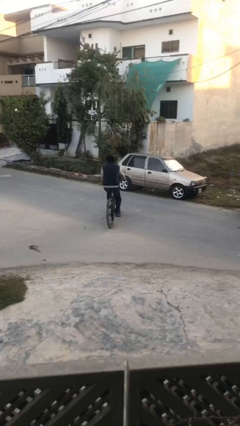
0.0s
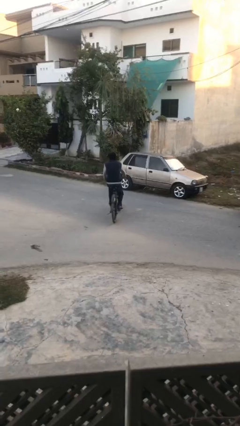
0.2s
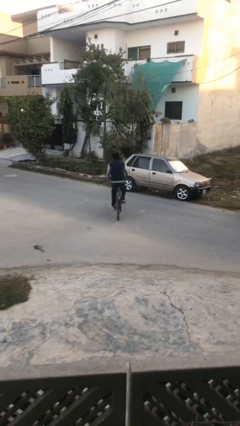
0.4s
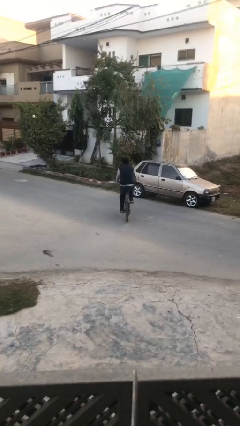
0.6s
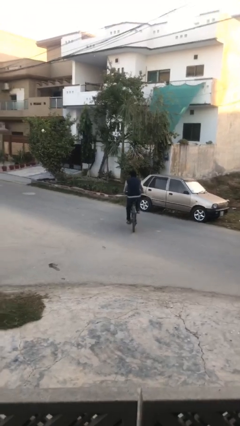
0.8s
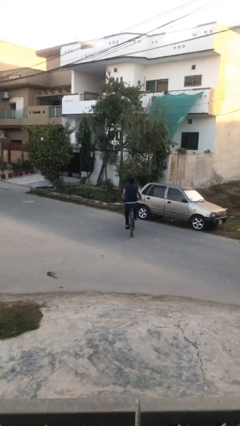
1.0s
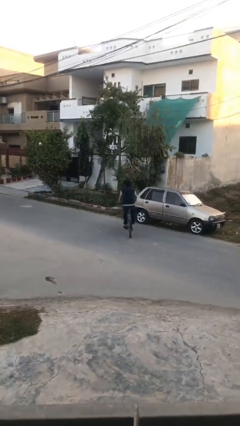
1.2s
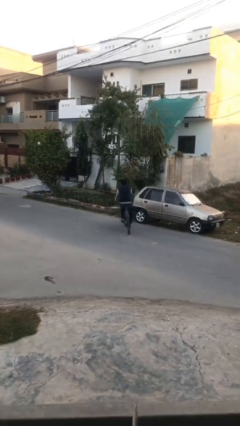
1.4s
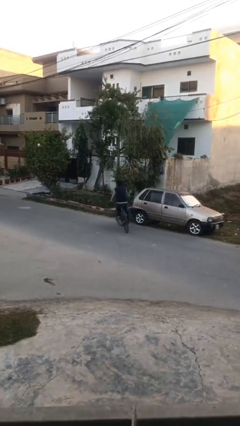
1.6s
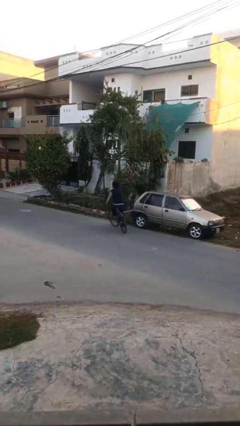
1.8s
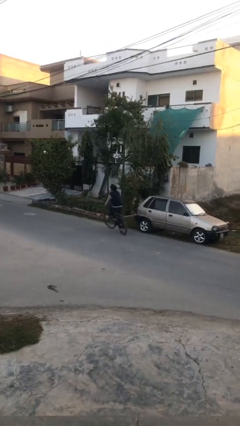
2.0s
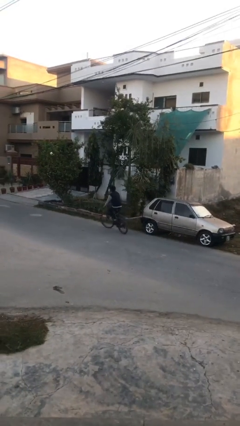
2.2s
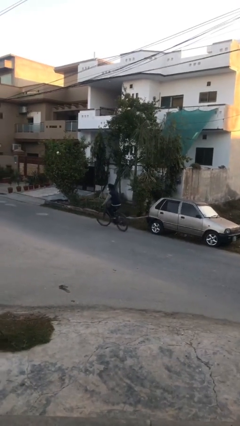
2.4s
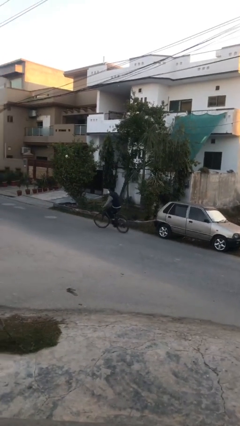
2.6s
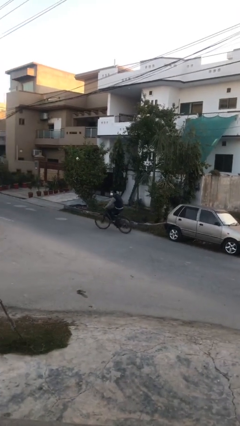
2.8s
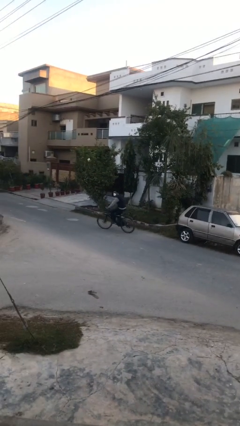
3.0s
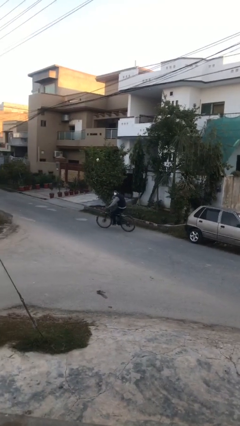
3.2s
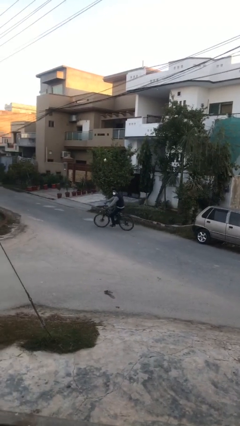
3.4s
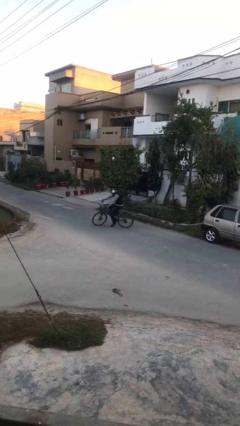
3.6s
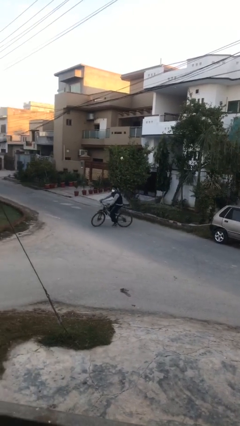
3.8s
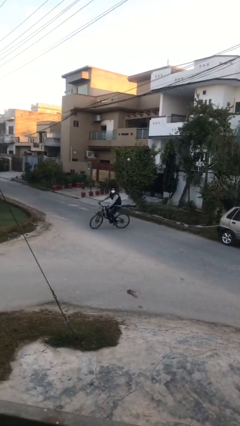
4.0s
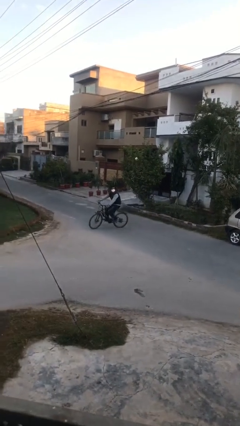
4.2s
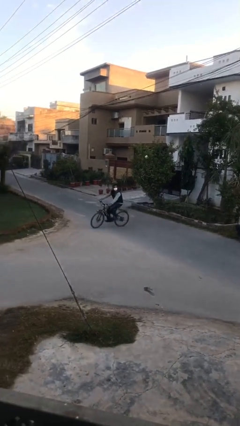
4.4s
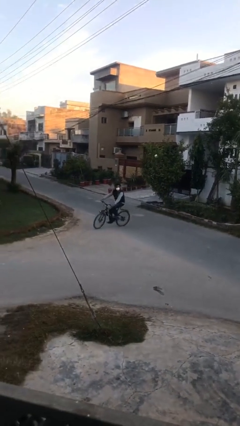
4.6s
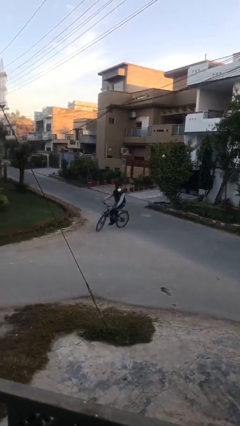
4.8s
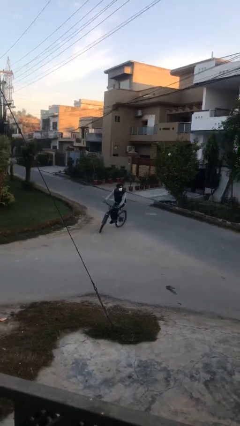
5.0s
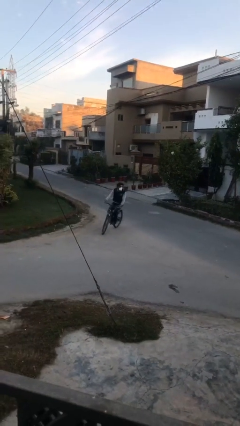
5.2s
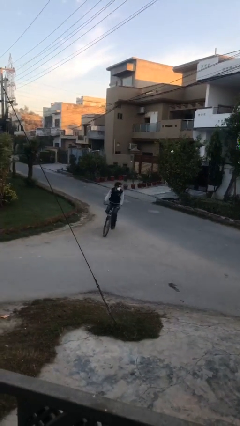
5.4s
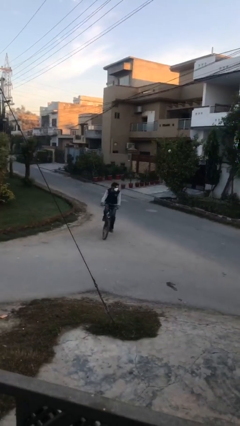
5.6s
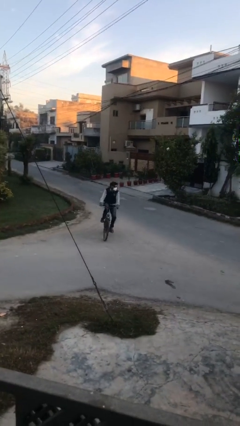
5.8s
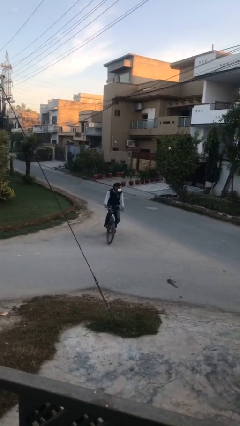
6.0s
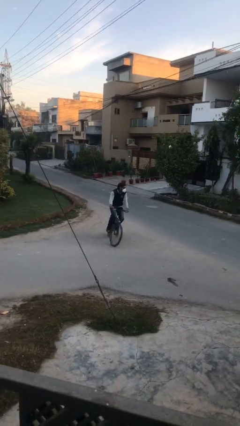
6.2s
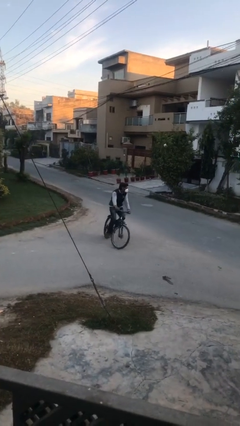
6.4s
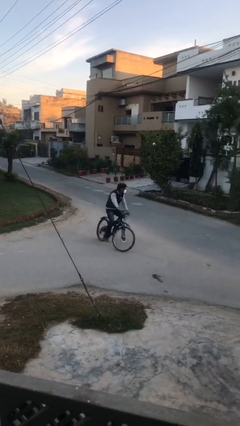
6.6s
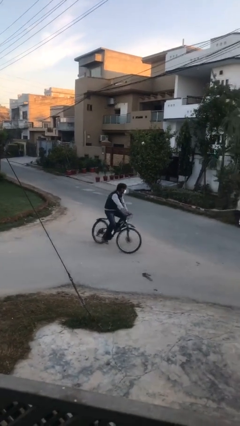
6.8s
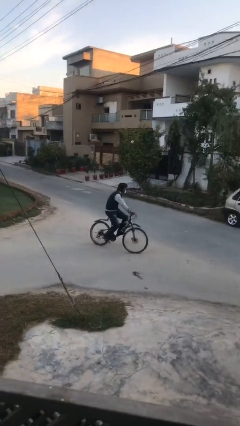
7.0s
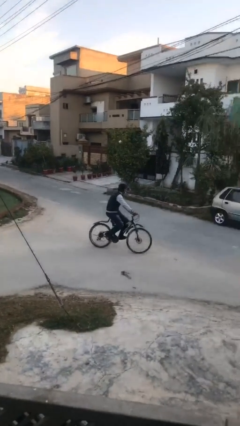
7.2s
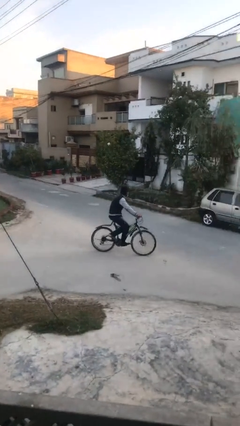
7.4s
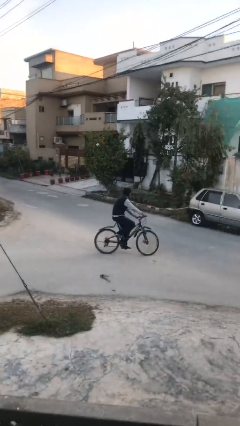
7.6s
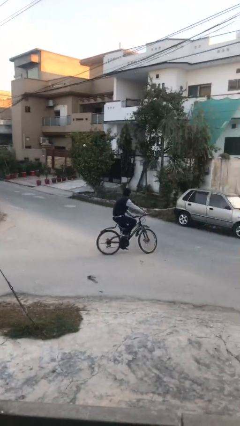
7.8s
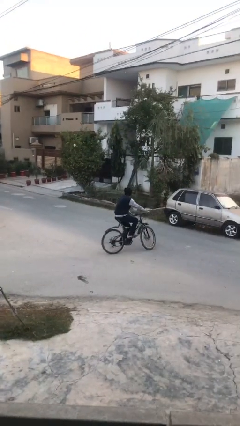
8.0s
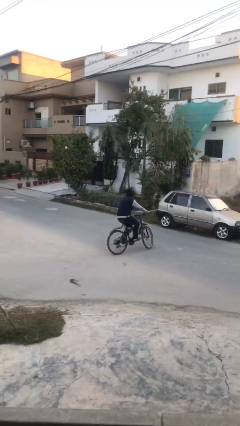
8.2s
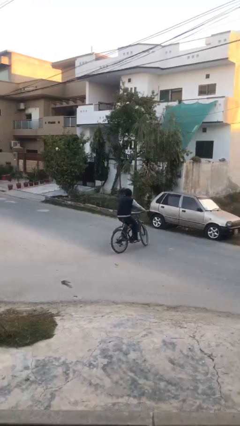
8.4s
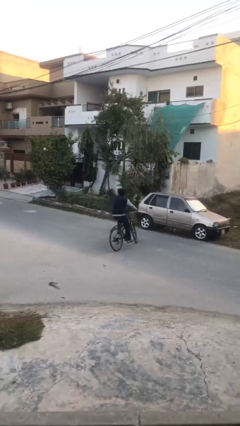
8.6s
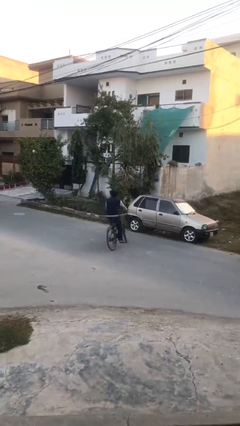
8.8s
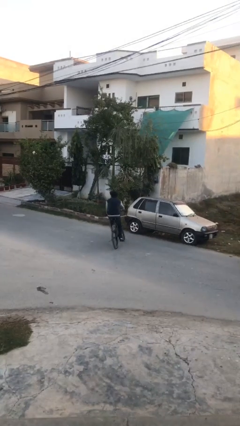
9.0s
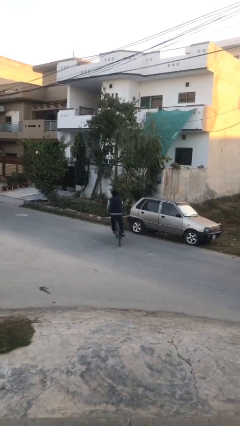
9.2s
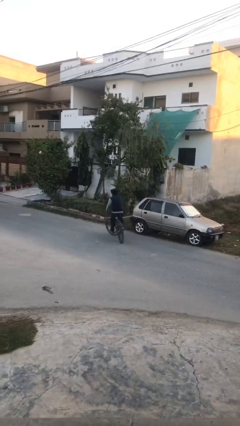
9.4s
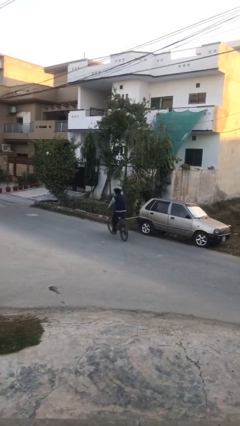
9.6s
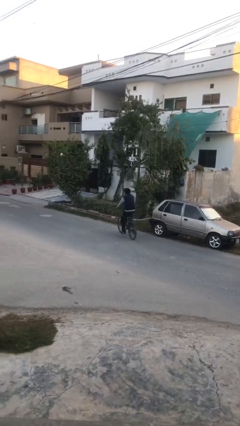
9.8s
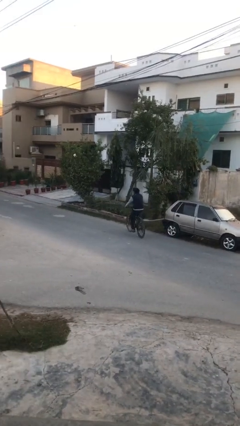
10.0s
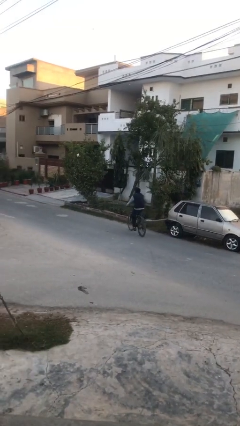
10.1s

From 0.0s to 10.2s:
person rides bicycle

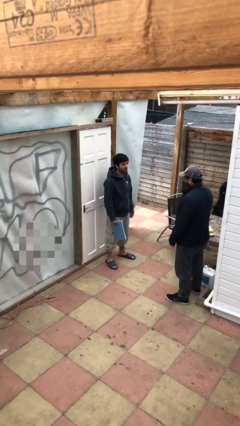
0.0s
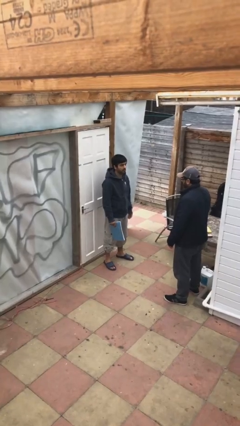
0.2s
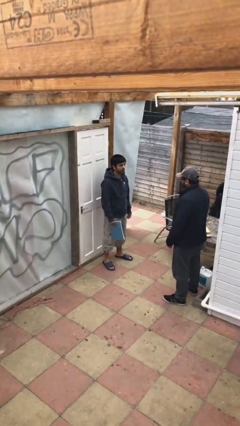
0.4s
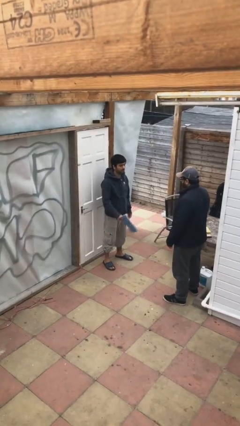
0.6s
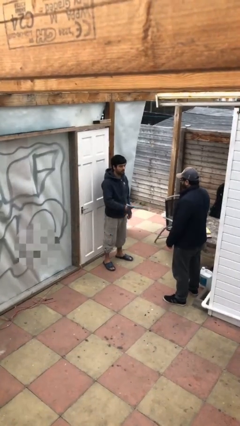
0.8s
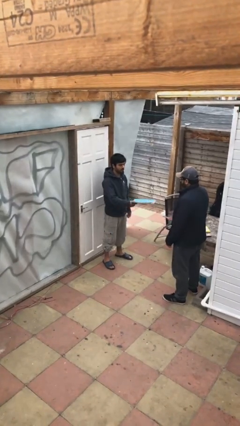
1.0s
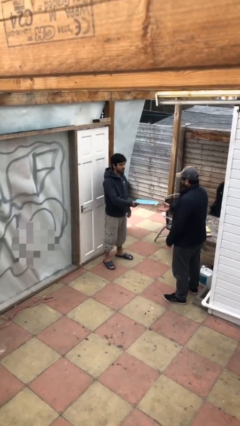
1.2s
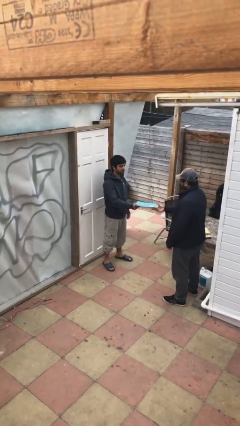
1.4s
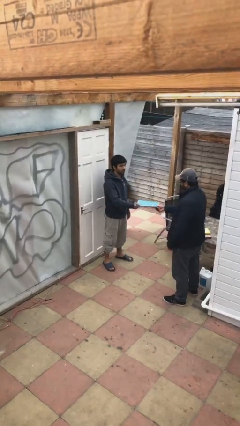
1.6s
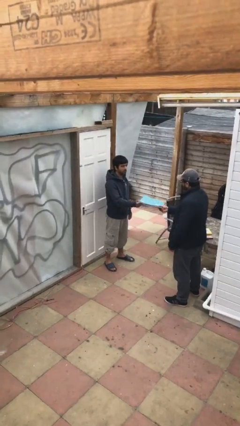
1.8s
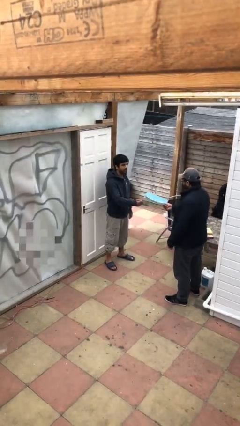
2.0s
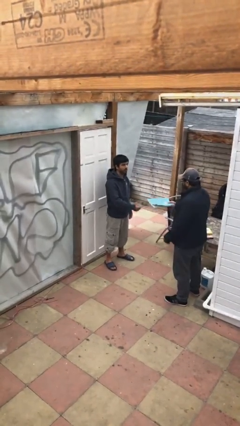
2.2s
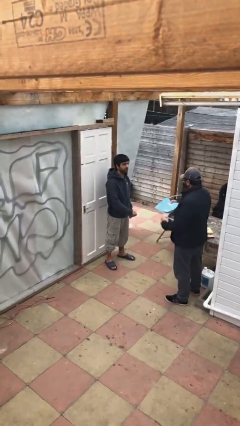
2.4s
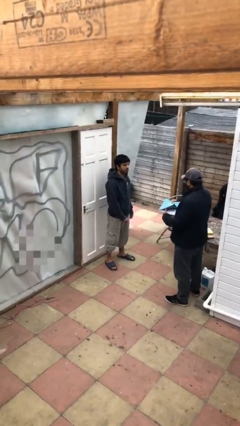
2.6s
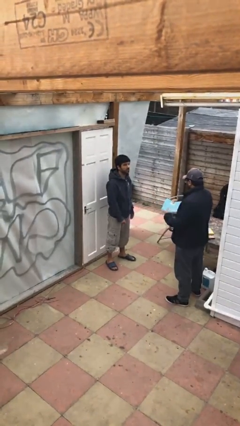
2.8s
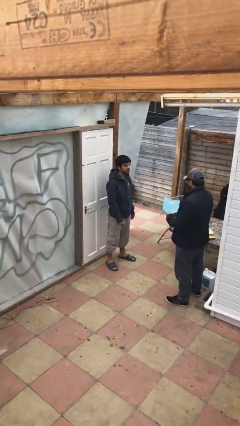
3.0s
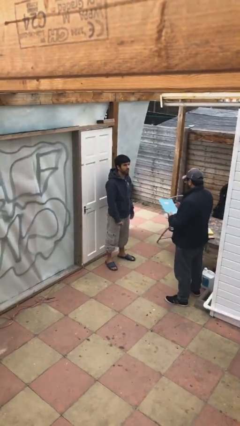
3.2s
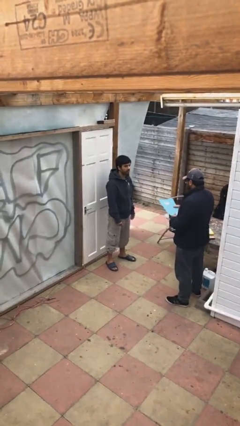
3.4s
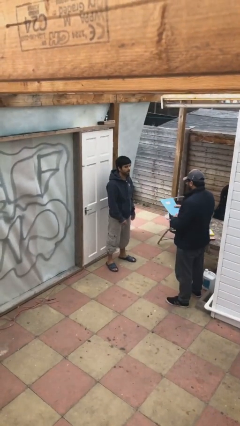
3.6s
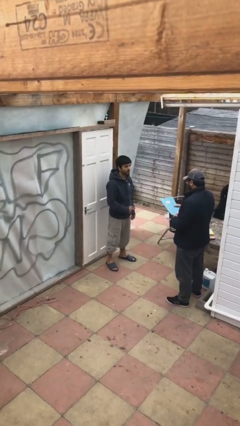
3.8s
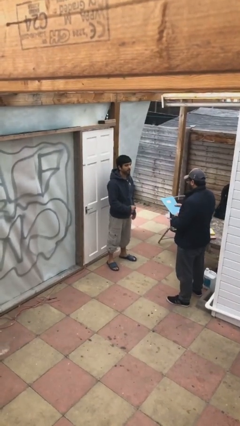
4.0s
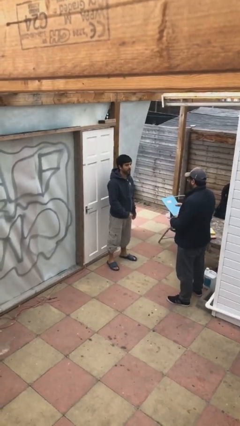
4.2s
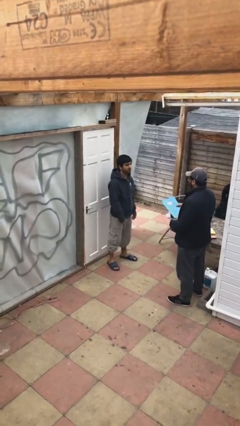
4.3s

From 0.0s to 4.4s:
person transfers object to person

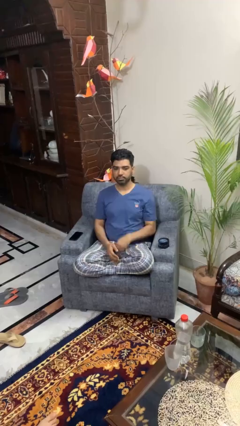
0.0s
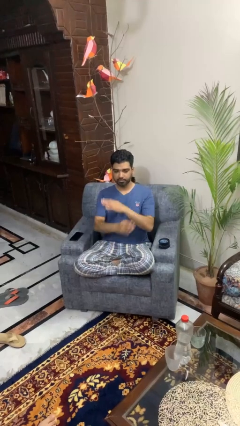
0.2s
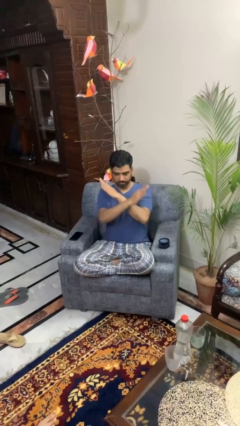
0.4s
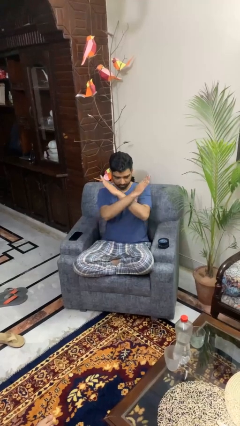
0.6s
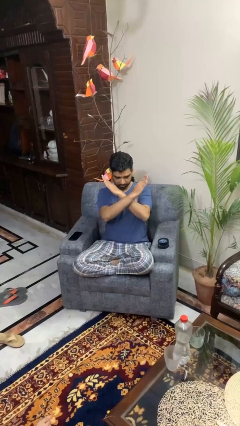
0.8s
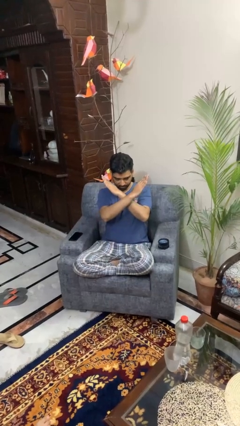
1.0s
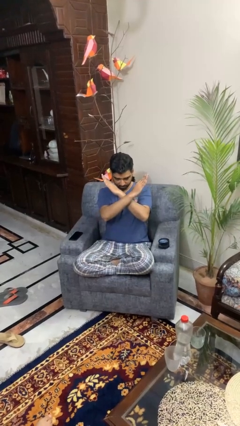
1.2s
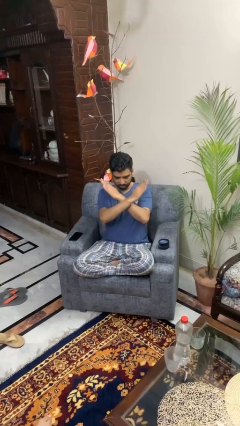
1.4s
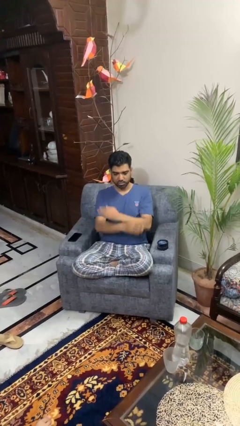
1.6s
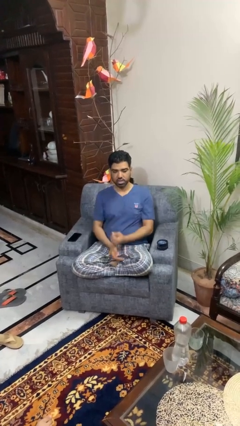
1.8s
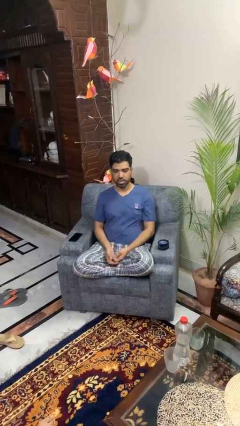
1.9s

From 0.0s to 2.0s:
person gestures arms x

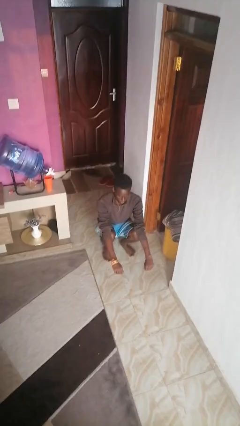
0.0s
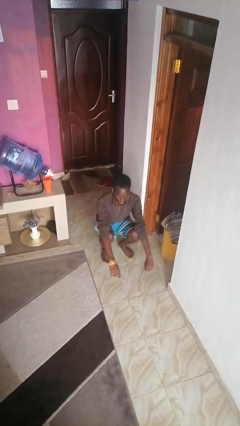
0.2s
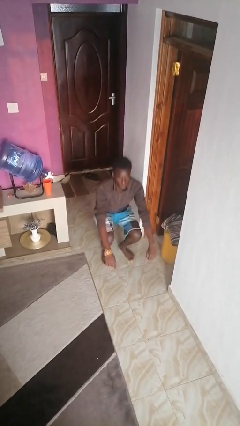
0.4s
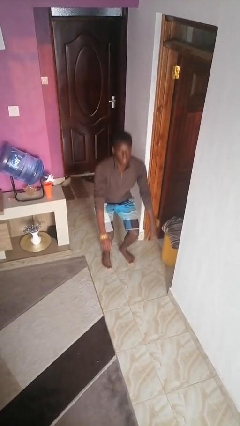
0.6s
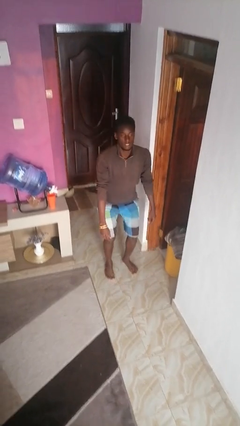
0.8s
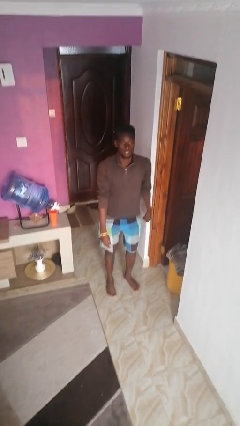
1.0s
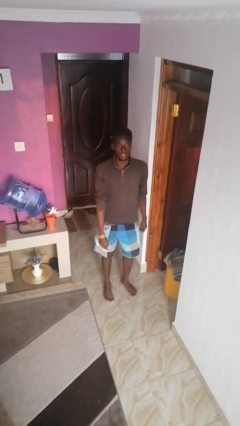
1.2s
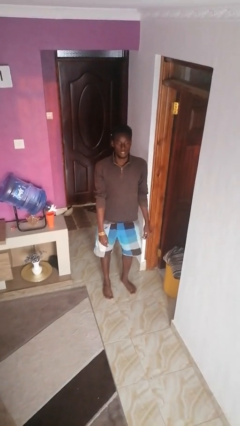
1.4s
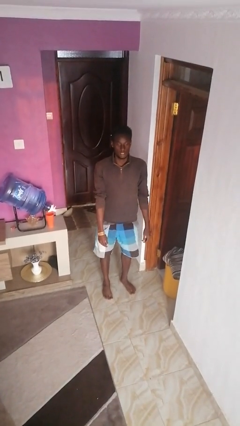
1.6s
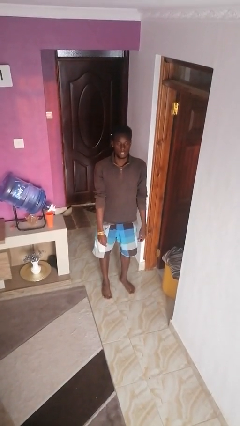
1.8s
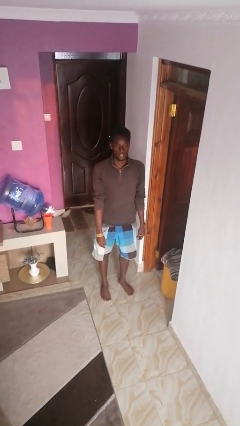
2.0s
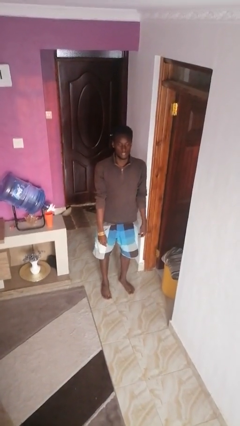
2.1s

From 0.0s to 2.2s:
person stands up
